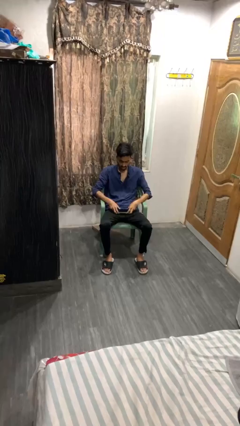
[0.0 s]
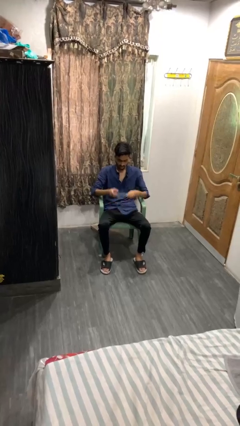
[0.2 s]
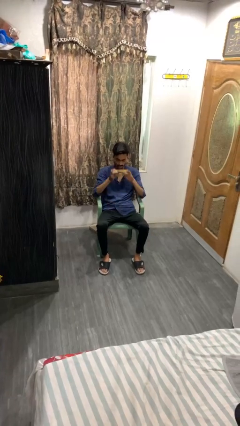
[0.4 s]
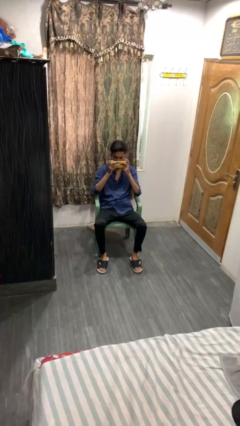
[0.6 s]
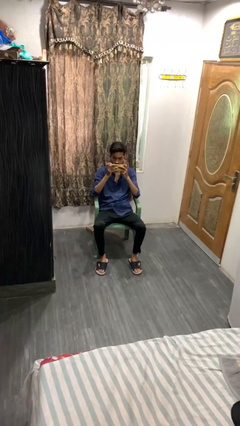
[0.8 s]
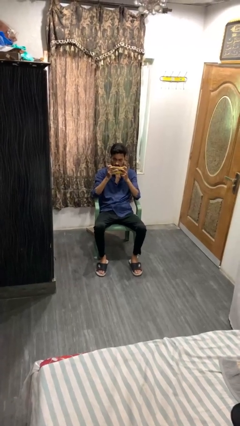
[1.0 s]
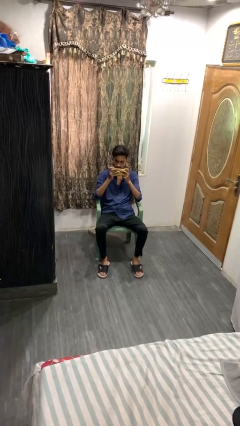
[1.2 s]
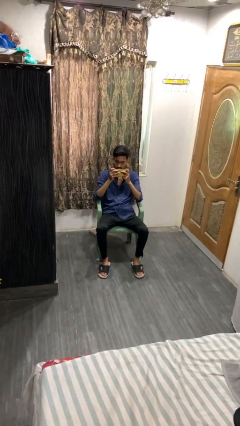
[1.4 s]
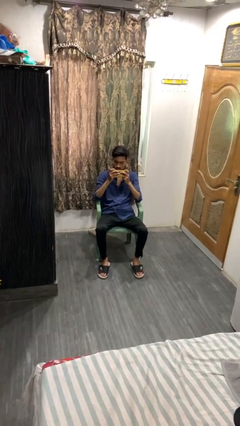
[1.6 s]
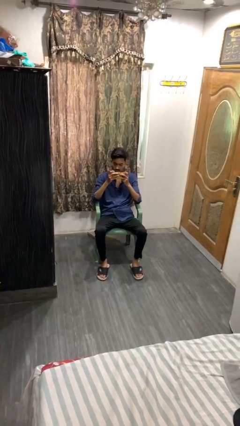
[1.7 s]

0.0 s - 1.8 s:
person interacts with handheld game

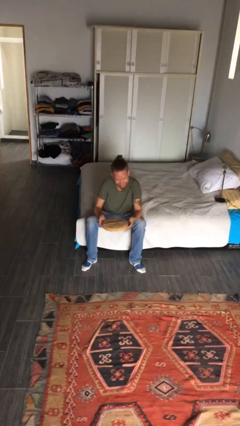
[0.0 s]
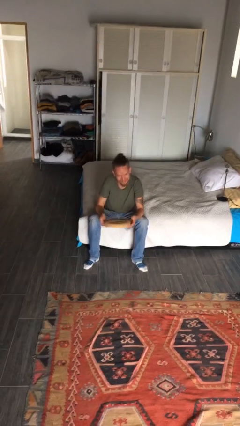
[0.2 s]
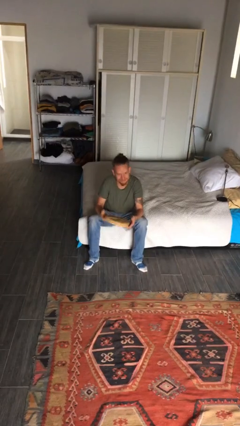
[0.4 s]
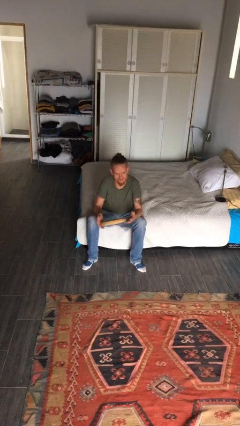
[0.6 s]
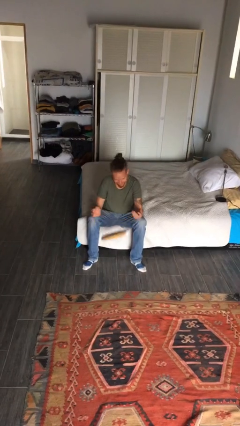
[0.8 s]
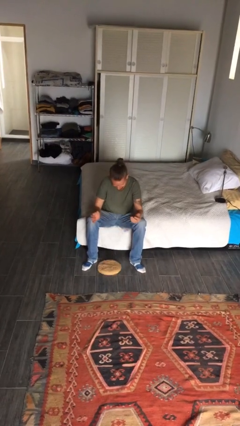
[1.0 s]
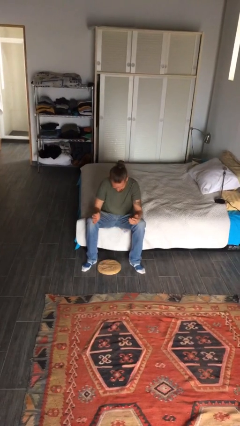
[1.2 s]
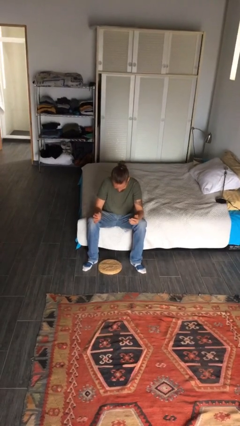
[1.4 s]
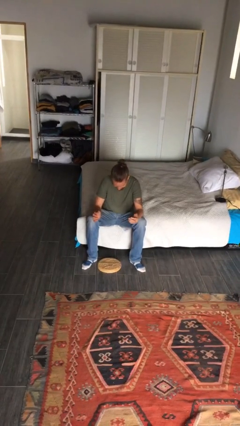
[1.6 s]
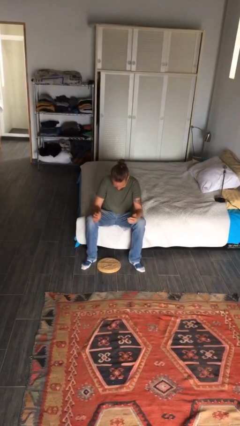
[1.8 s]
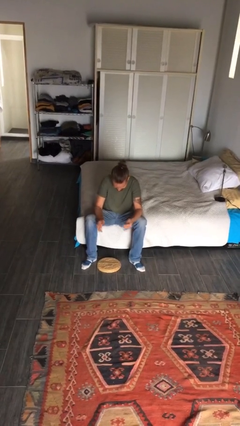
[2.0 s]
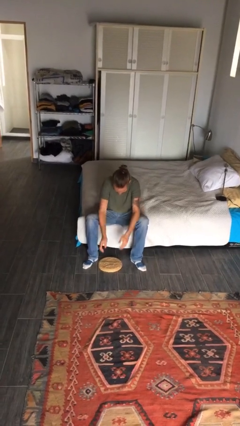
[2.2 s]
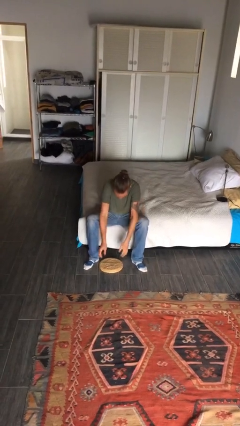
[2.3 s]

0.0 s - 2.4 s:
person drops object

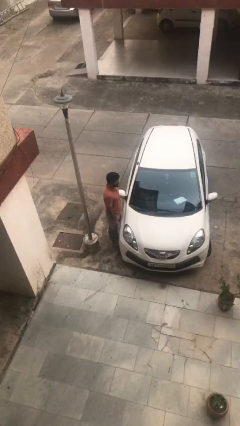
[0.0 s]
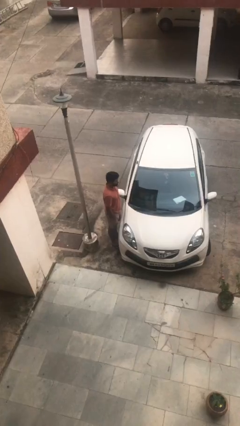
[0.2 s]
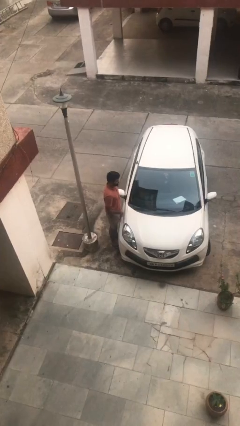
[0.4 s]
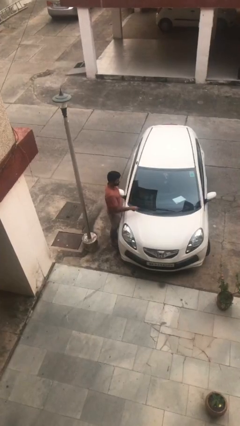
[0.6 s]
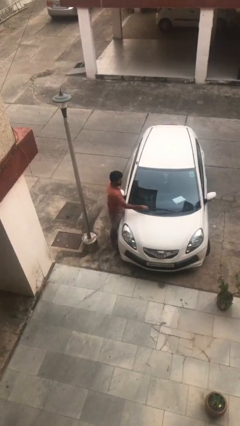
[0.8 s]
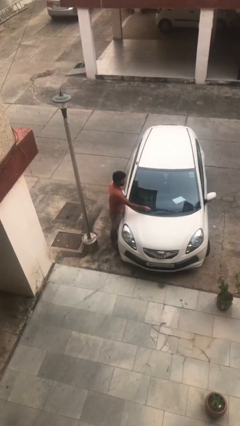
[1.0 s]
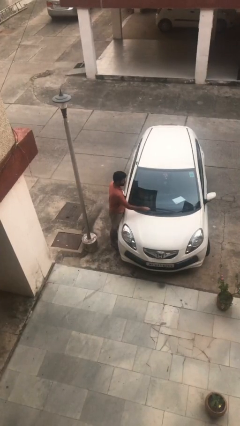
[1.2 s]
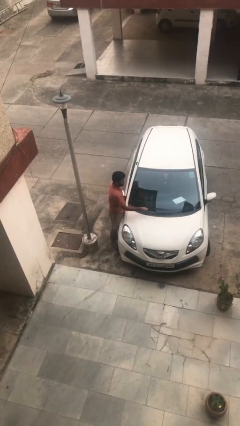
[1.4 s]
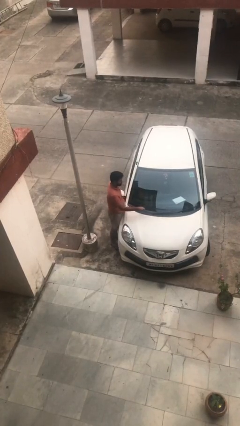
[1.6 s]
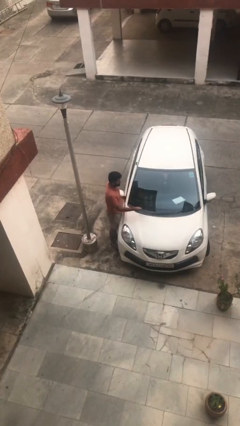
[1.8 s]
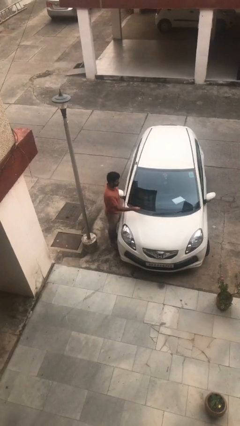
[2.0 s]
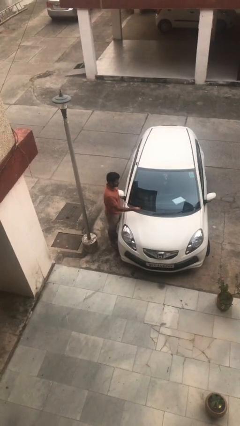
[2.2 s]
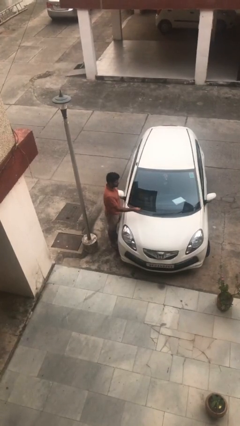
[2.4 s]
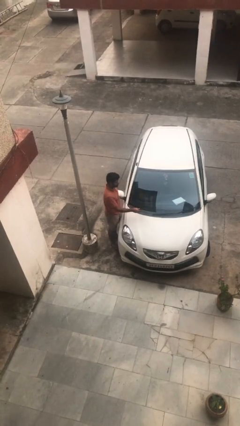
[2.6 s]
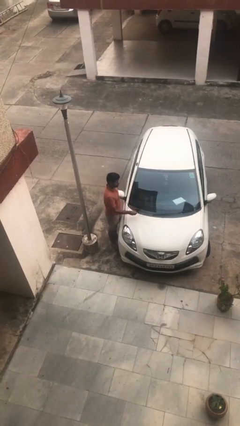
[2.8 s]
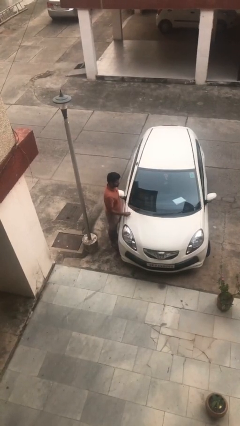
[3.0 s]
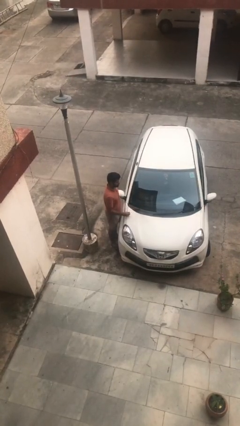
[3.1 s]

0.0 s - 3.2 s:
person flips up car wipers

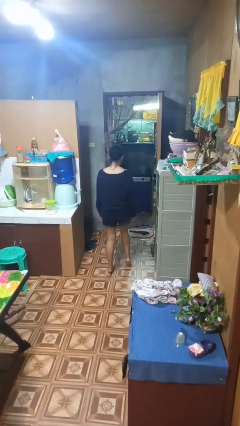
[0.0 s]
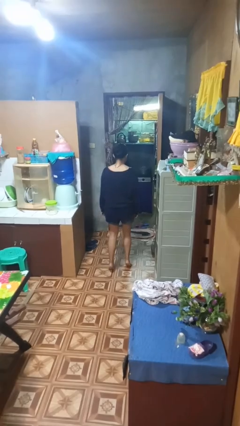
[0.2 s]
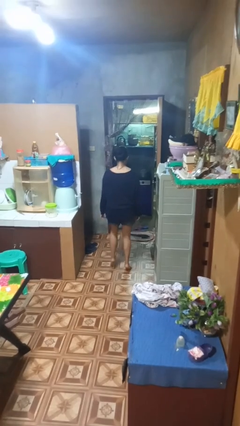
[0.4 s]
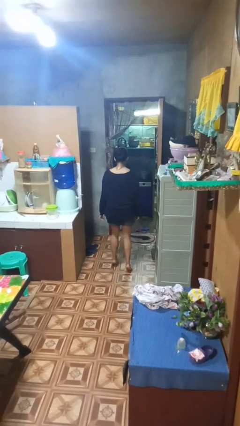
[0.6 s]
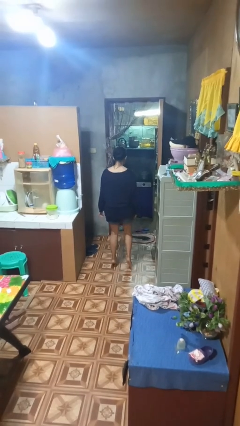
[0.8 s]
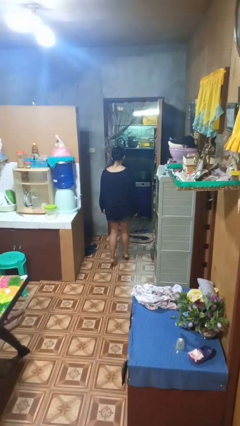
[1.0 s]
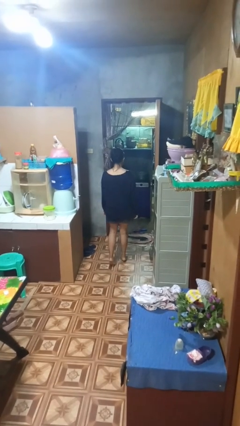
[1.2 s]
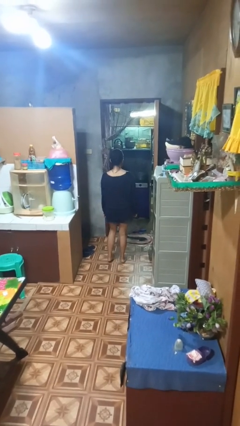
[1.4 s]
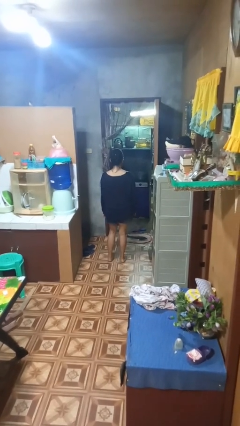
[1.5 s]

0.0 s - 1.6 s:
person walks tiptoe

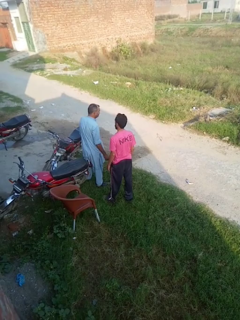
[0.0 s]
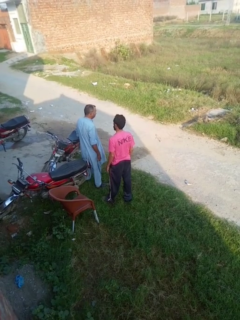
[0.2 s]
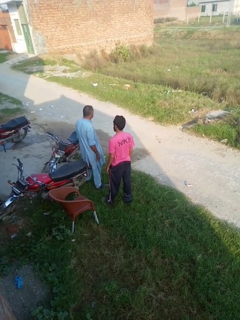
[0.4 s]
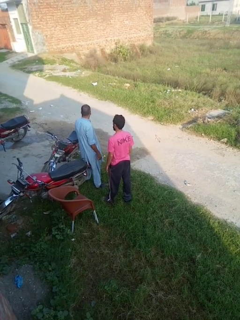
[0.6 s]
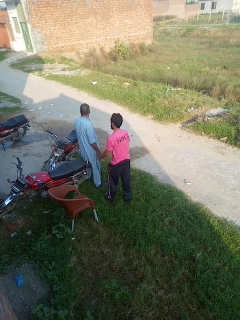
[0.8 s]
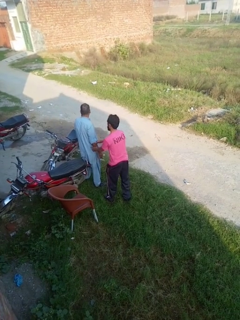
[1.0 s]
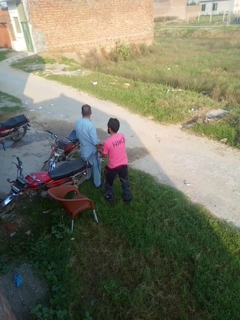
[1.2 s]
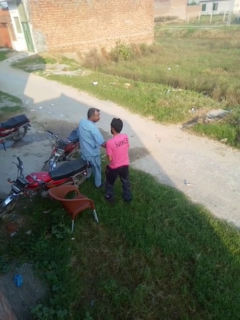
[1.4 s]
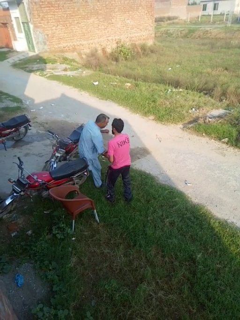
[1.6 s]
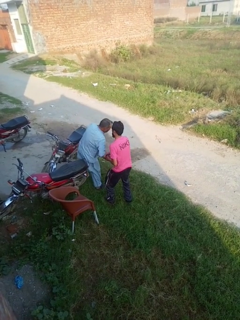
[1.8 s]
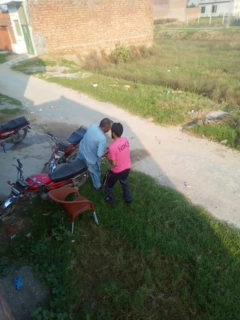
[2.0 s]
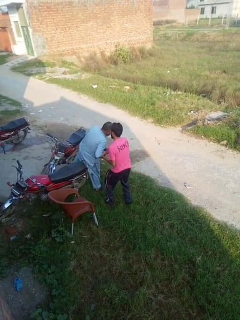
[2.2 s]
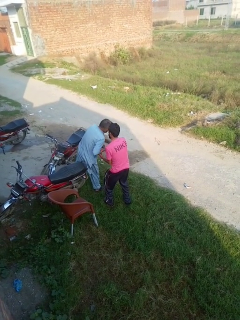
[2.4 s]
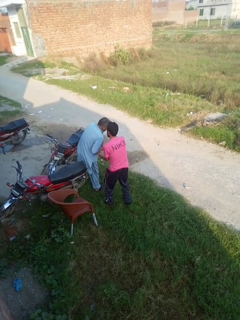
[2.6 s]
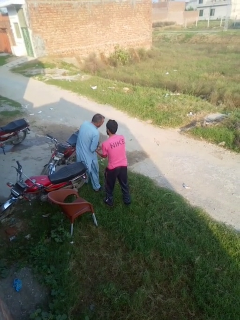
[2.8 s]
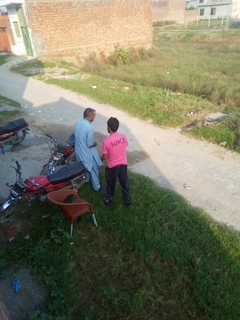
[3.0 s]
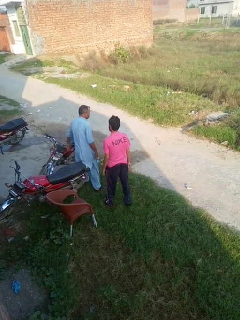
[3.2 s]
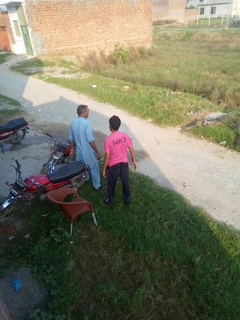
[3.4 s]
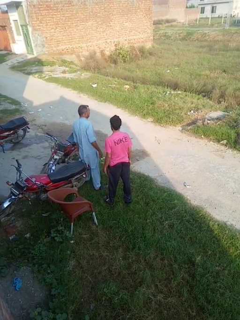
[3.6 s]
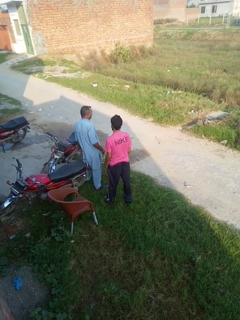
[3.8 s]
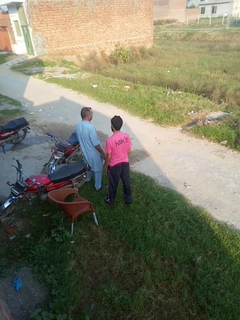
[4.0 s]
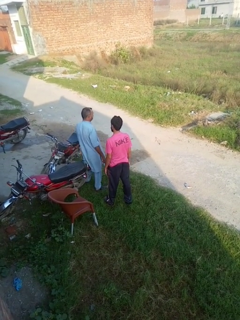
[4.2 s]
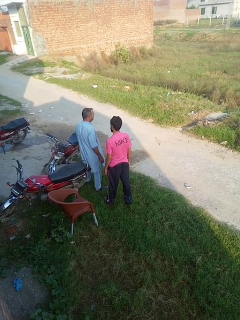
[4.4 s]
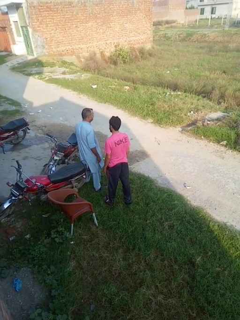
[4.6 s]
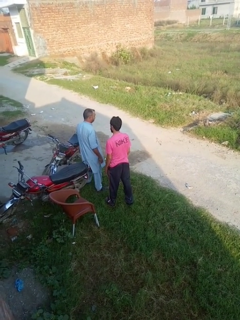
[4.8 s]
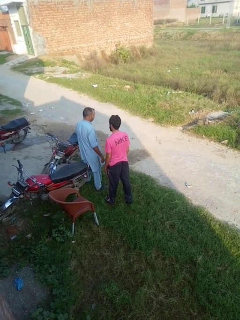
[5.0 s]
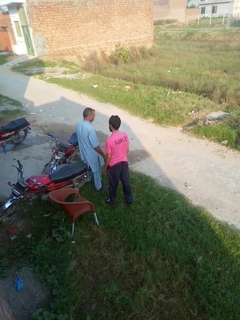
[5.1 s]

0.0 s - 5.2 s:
person grabs person by forearm

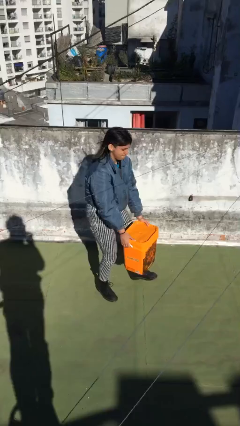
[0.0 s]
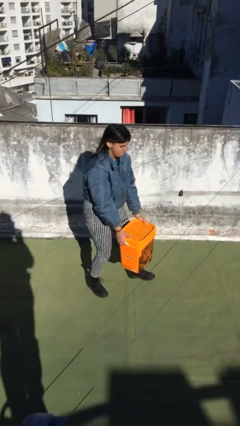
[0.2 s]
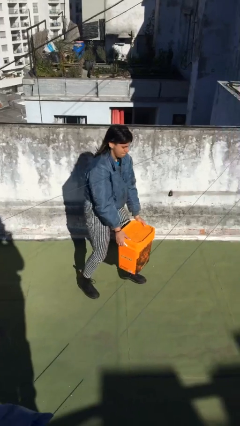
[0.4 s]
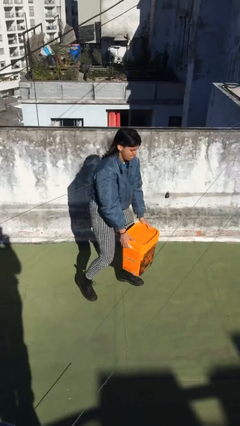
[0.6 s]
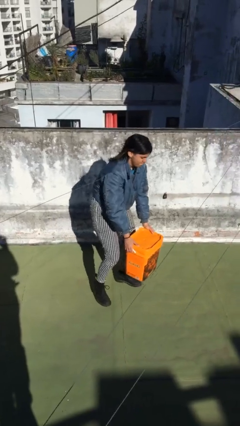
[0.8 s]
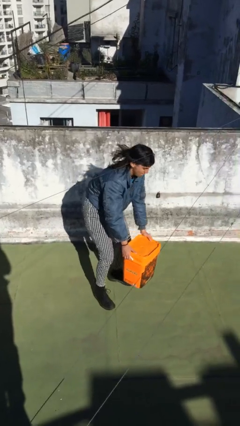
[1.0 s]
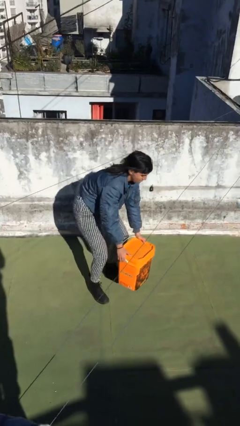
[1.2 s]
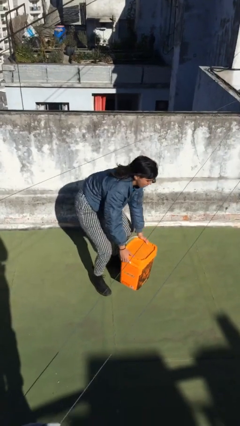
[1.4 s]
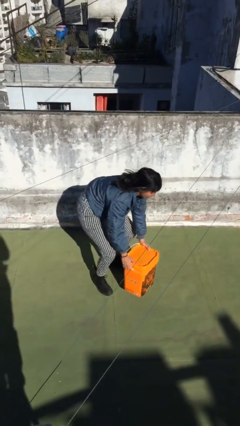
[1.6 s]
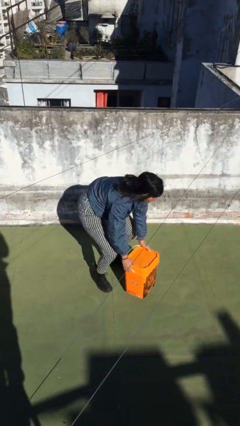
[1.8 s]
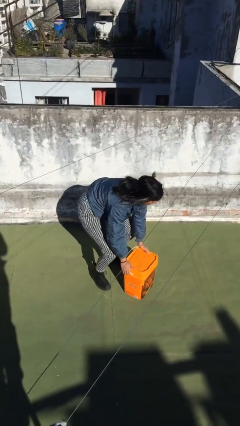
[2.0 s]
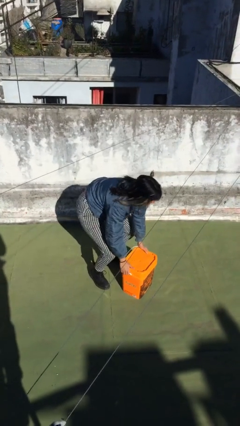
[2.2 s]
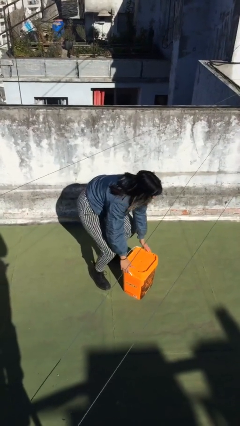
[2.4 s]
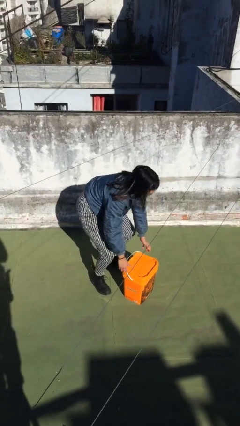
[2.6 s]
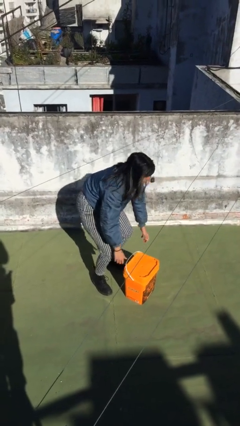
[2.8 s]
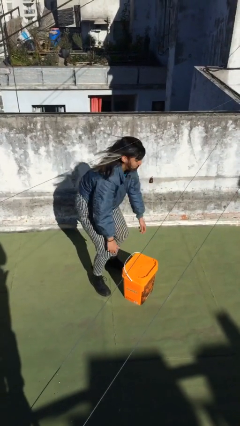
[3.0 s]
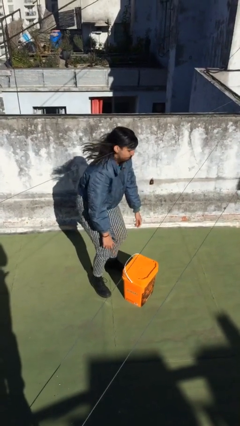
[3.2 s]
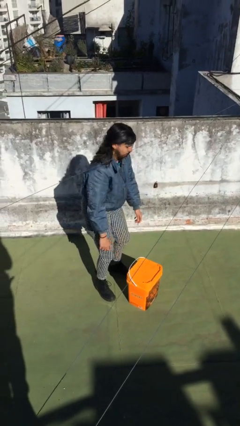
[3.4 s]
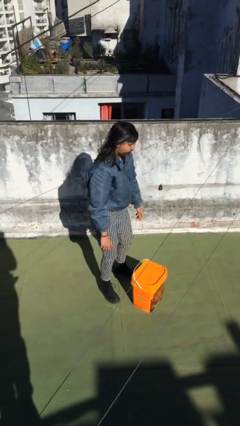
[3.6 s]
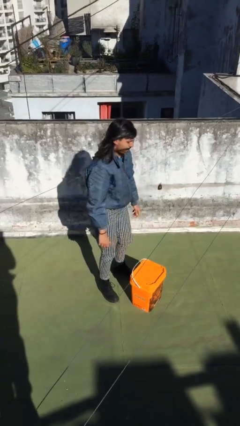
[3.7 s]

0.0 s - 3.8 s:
person puts down object on floor

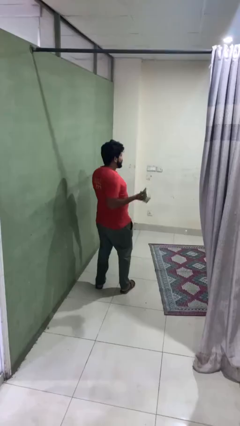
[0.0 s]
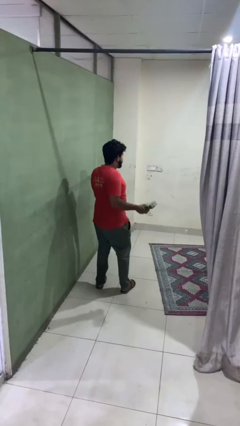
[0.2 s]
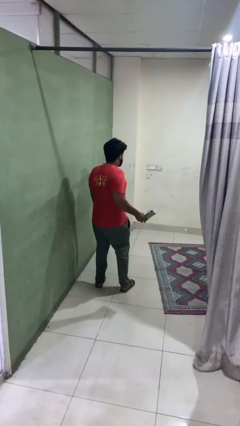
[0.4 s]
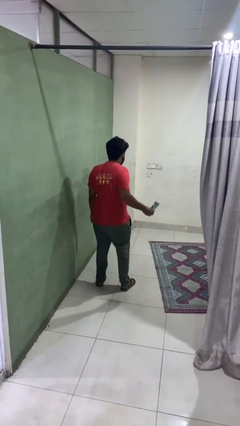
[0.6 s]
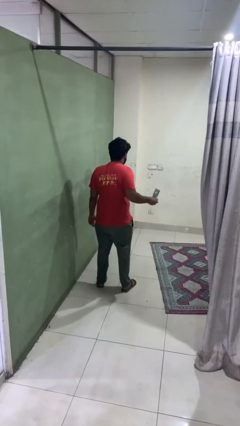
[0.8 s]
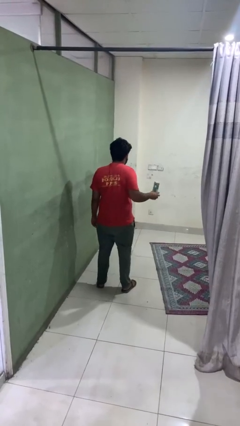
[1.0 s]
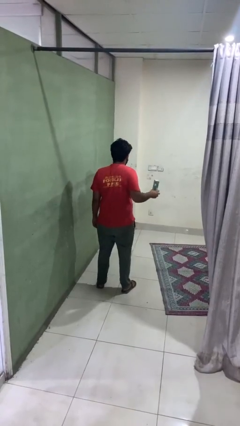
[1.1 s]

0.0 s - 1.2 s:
person catches dropped object
